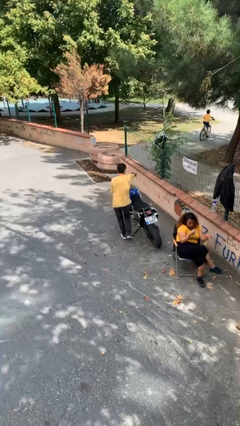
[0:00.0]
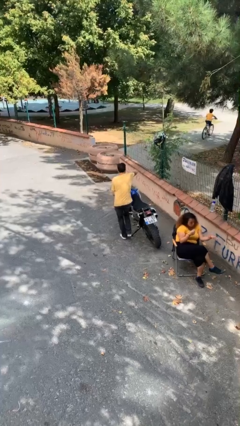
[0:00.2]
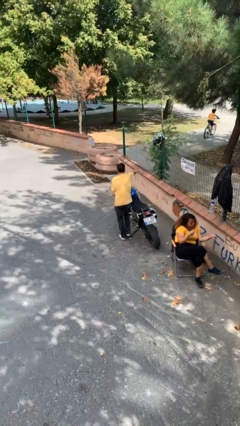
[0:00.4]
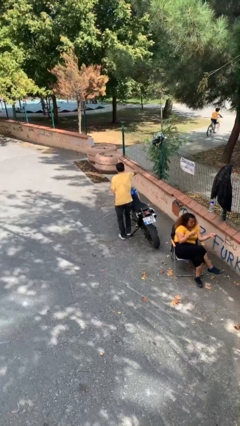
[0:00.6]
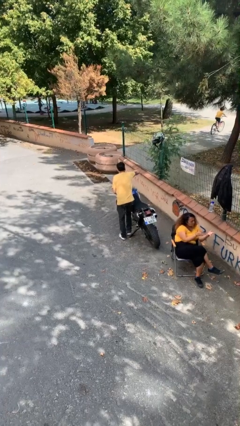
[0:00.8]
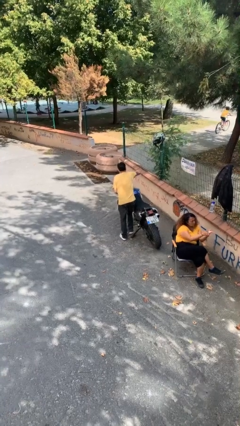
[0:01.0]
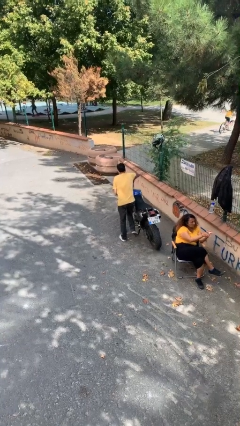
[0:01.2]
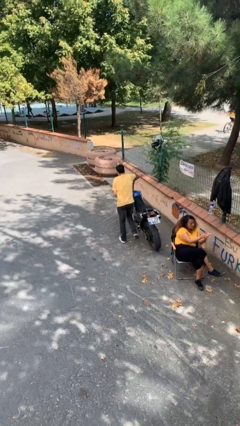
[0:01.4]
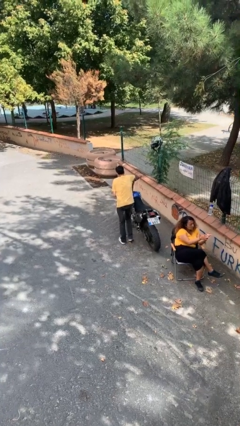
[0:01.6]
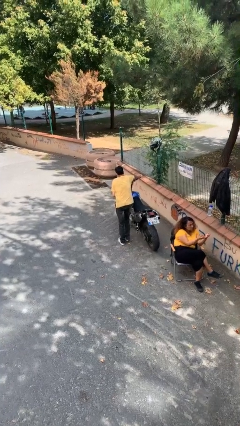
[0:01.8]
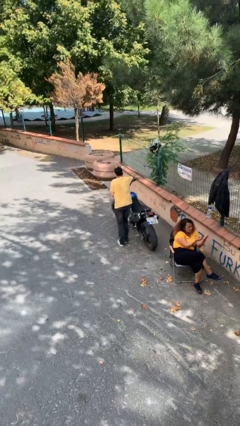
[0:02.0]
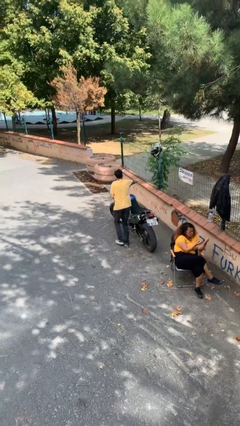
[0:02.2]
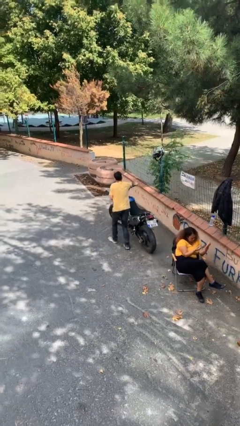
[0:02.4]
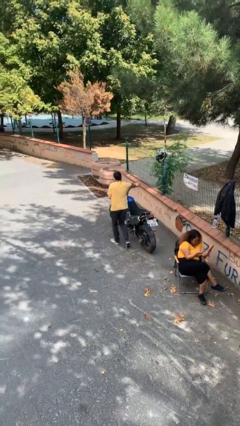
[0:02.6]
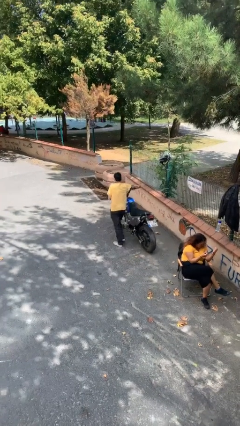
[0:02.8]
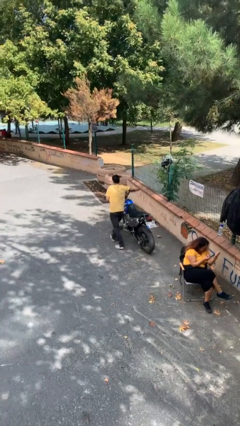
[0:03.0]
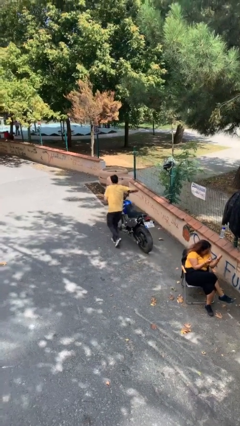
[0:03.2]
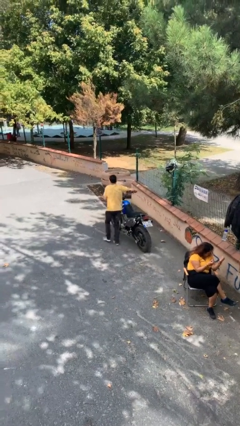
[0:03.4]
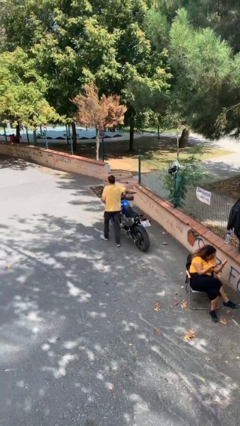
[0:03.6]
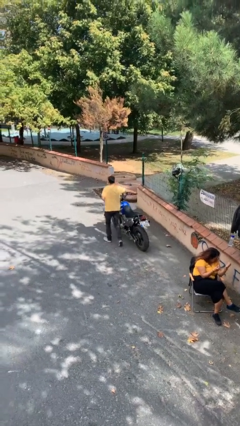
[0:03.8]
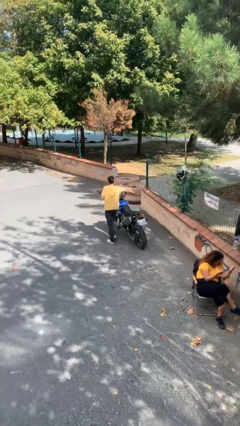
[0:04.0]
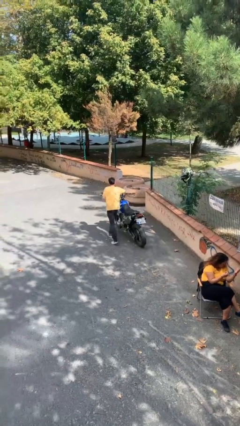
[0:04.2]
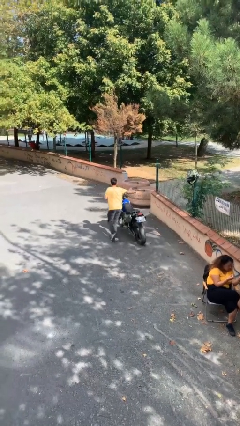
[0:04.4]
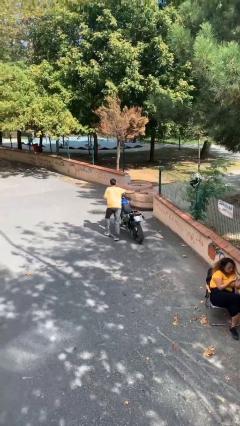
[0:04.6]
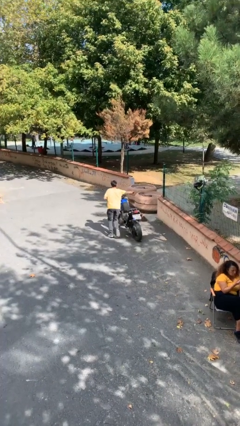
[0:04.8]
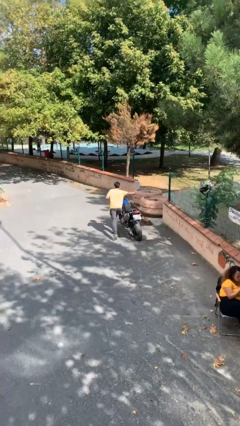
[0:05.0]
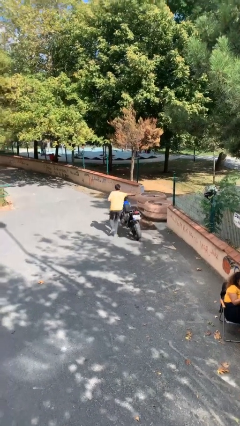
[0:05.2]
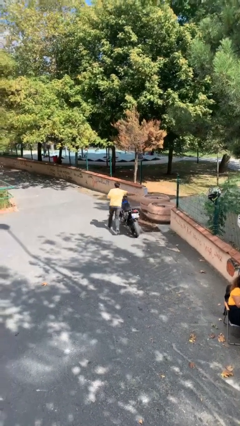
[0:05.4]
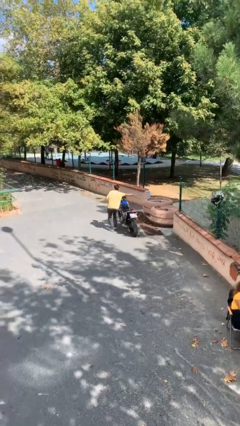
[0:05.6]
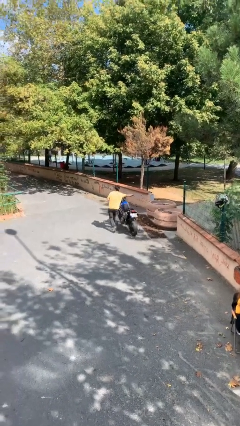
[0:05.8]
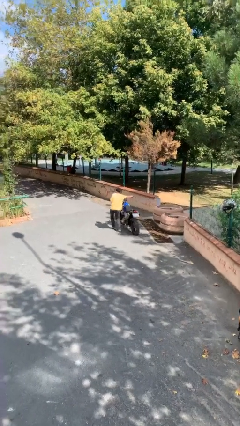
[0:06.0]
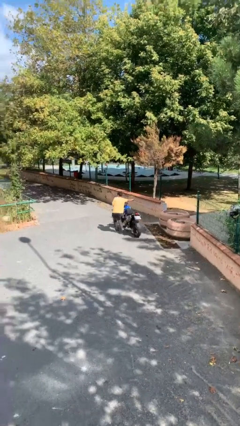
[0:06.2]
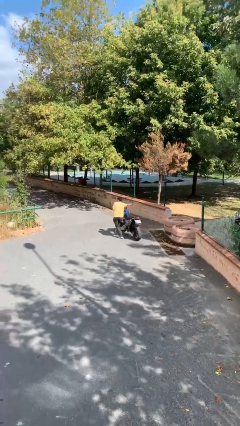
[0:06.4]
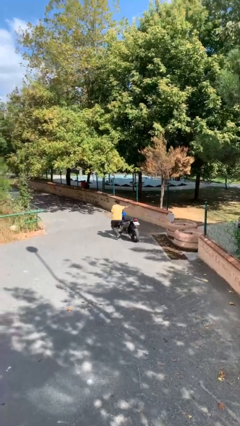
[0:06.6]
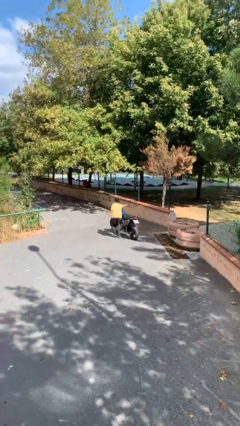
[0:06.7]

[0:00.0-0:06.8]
person steals object from person

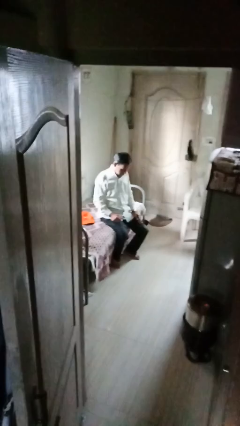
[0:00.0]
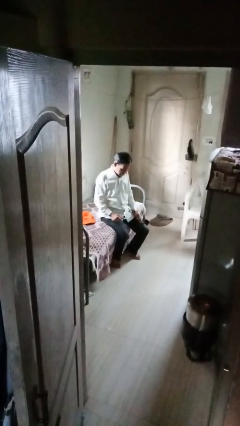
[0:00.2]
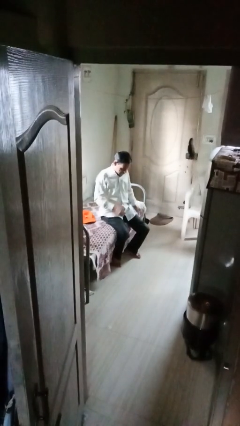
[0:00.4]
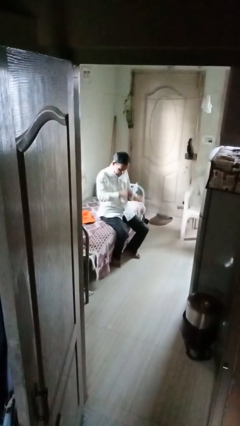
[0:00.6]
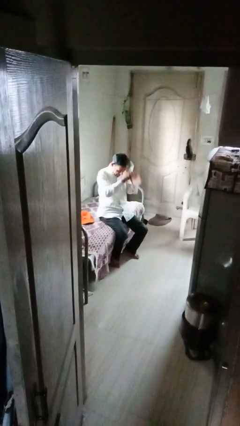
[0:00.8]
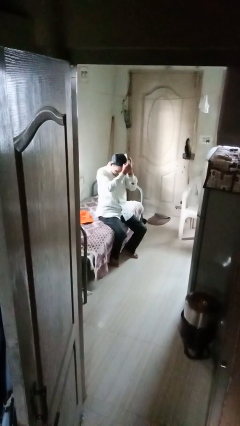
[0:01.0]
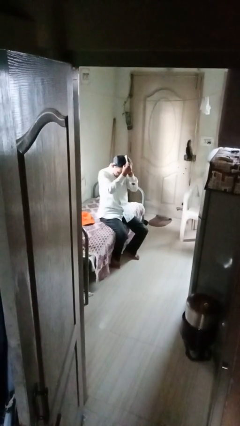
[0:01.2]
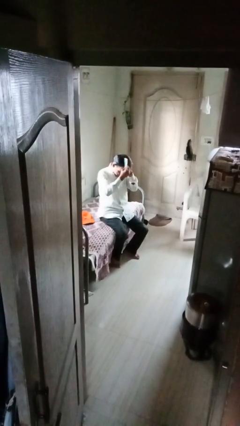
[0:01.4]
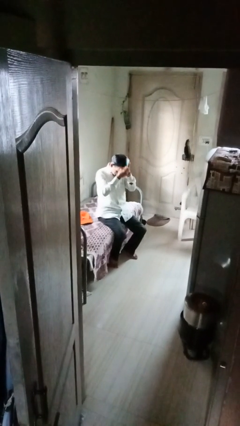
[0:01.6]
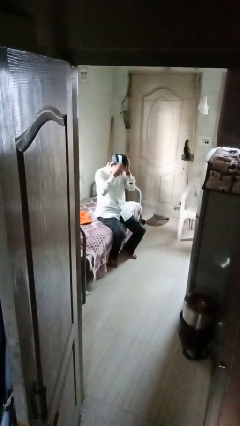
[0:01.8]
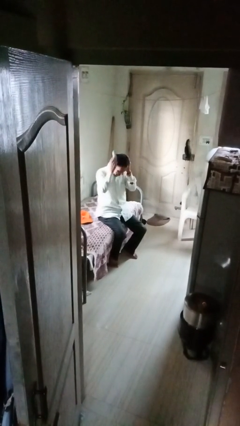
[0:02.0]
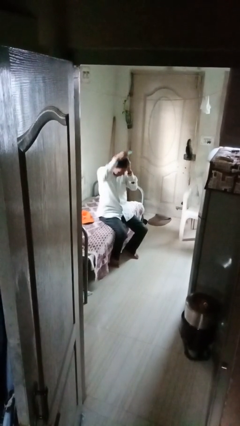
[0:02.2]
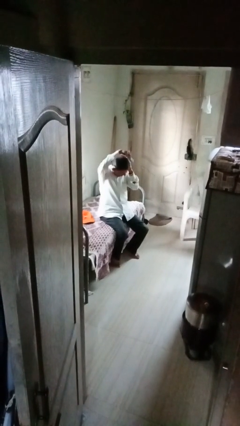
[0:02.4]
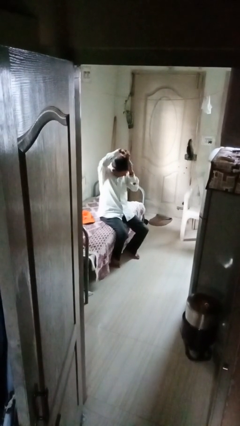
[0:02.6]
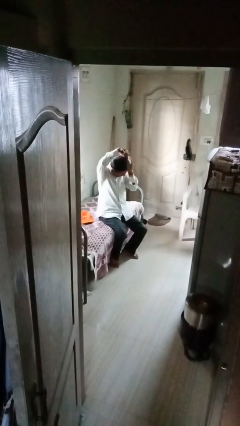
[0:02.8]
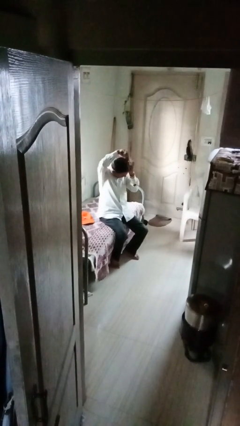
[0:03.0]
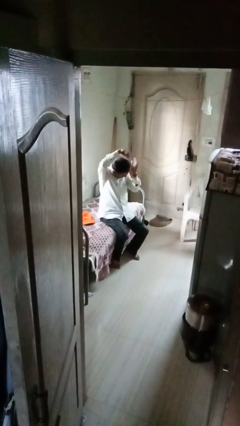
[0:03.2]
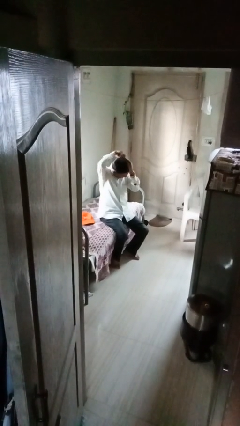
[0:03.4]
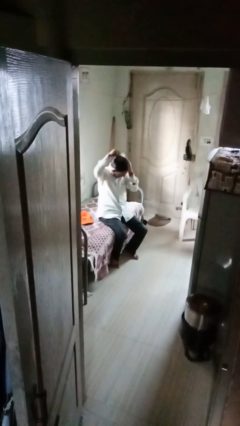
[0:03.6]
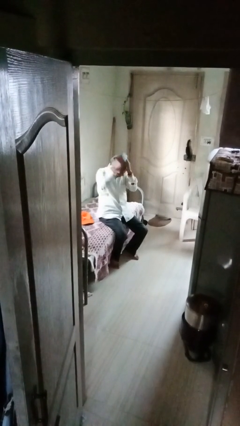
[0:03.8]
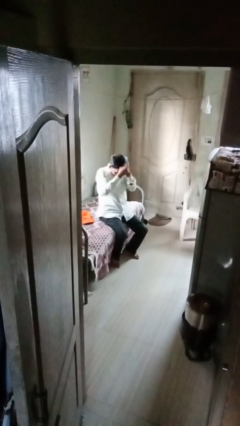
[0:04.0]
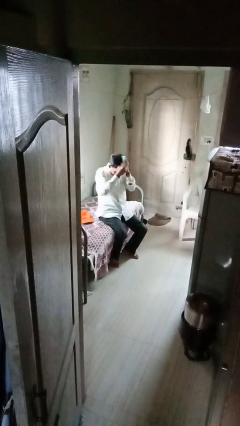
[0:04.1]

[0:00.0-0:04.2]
person brushes hair

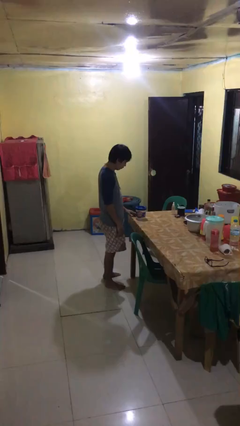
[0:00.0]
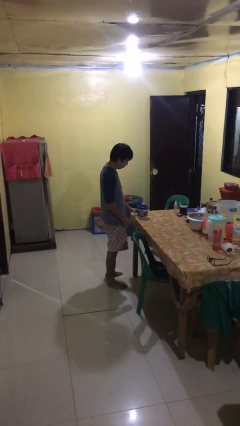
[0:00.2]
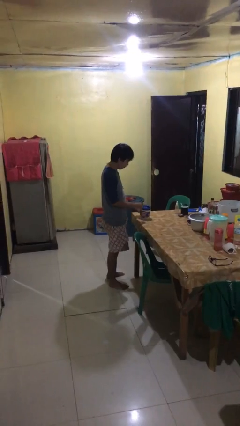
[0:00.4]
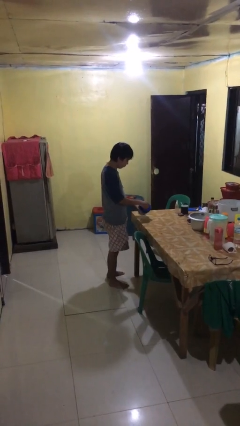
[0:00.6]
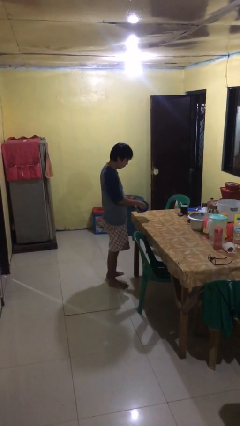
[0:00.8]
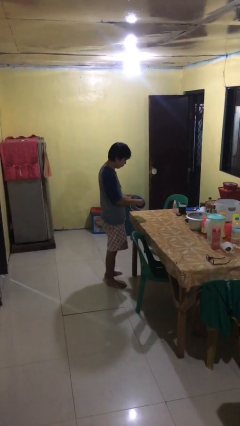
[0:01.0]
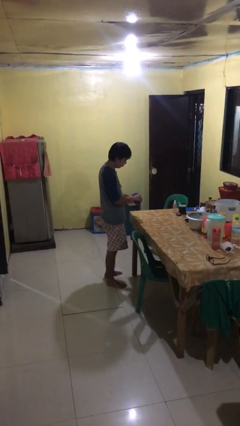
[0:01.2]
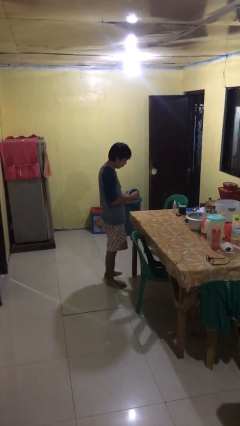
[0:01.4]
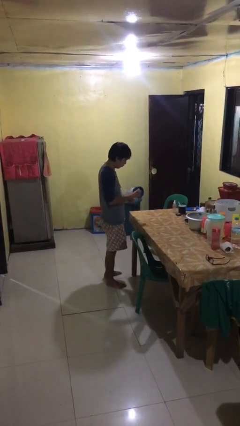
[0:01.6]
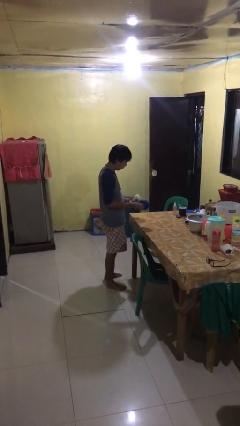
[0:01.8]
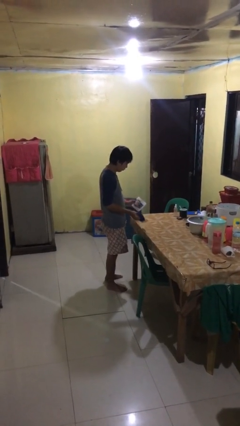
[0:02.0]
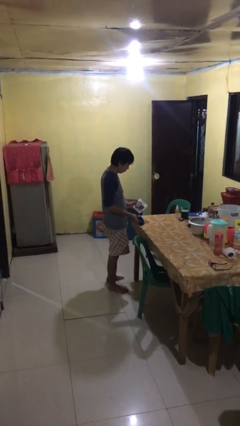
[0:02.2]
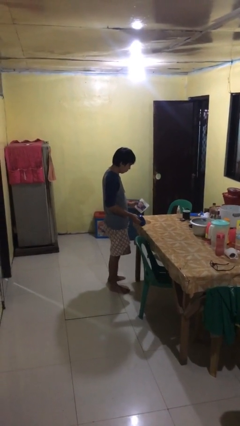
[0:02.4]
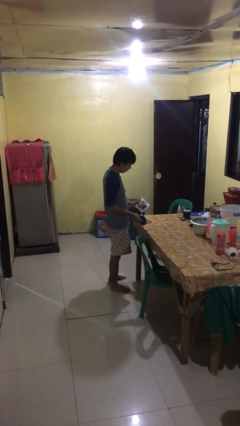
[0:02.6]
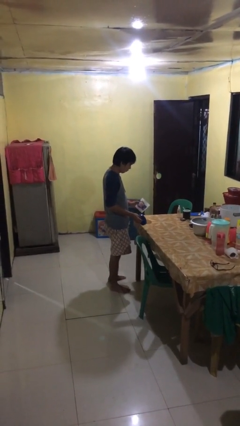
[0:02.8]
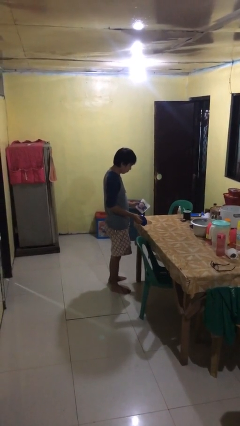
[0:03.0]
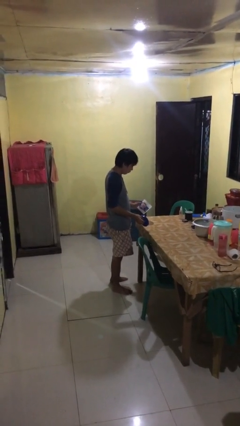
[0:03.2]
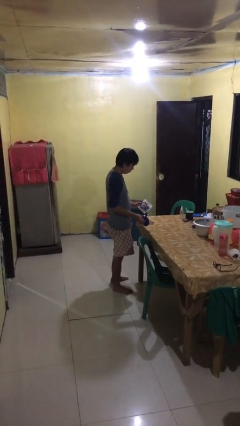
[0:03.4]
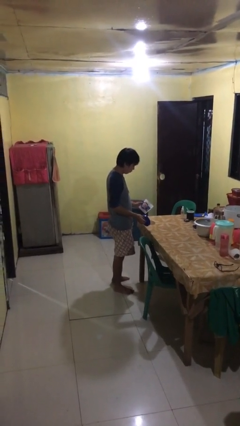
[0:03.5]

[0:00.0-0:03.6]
person opens jar

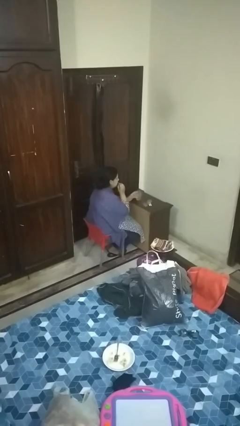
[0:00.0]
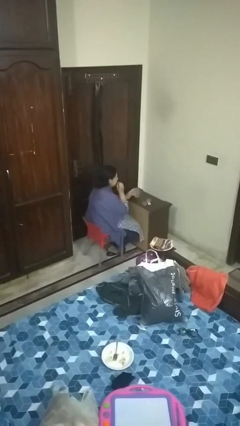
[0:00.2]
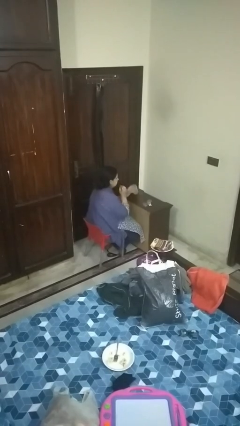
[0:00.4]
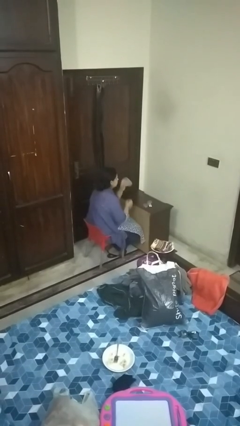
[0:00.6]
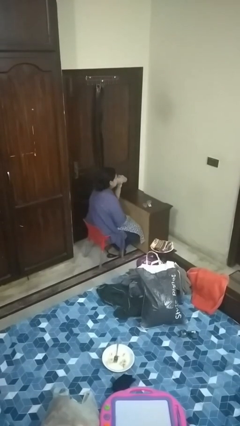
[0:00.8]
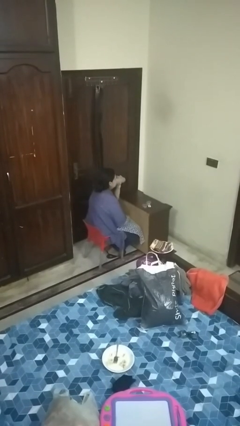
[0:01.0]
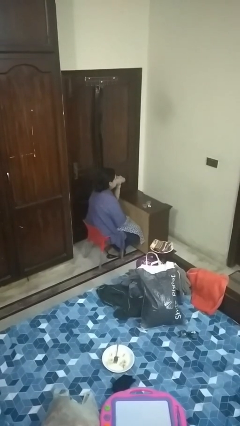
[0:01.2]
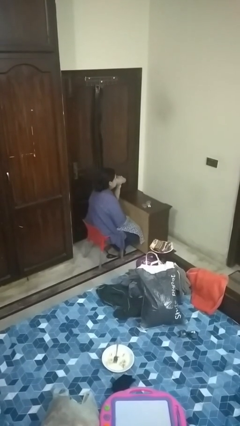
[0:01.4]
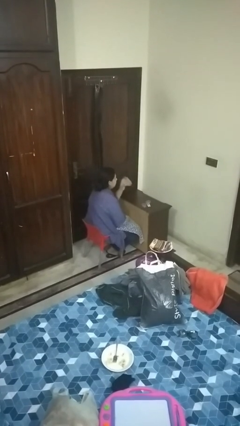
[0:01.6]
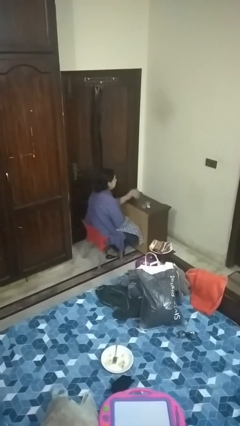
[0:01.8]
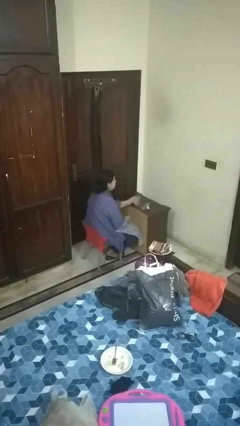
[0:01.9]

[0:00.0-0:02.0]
person drinks from cup

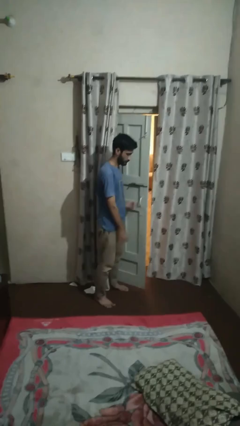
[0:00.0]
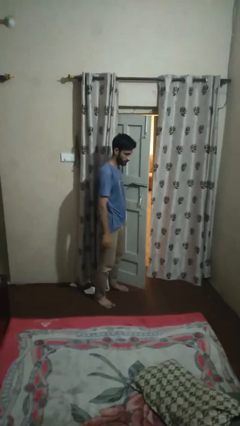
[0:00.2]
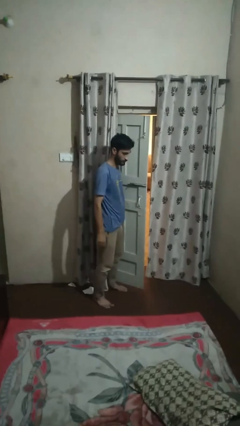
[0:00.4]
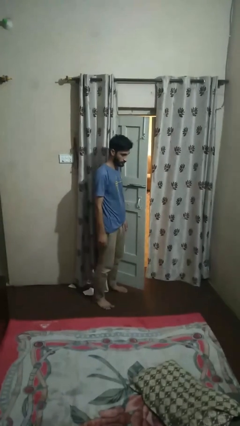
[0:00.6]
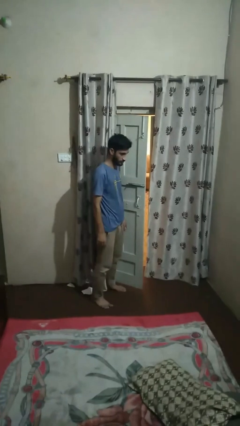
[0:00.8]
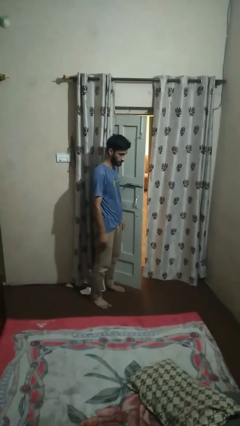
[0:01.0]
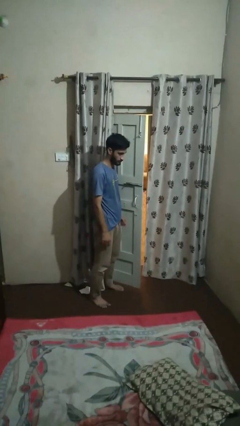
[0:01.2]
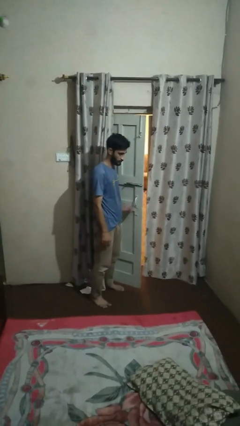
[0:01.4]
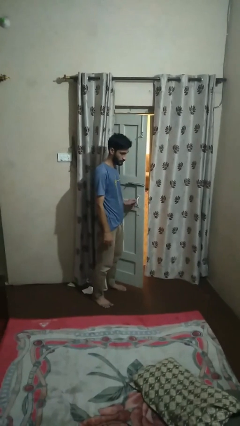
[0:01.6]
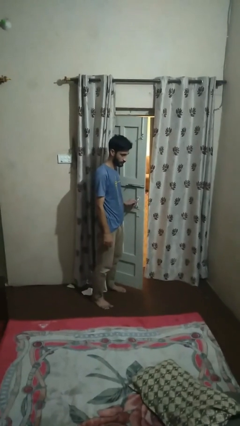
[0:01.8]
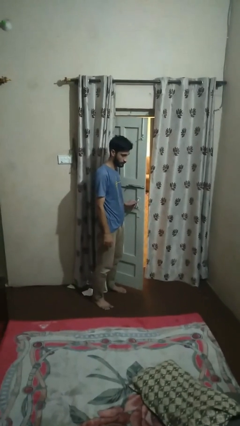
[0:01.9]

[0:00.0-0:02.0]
person opens facility door
